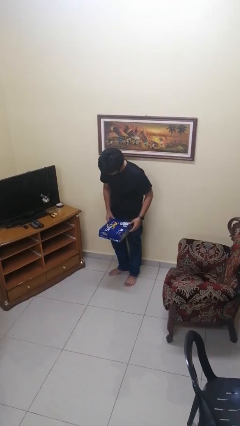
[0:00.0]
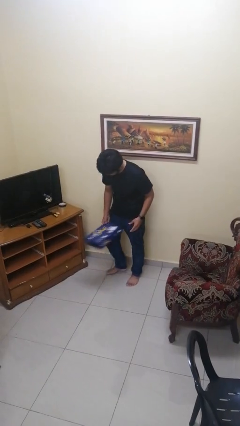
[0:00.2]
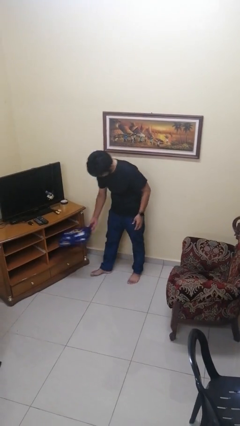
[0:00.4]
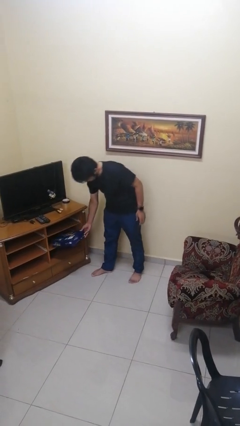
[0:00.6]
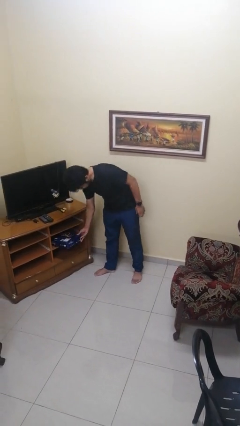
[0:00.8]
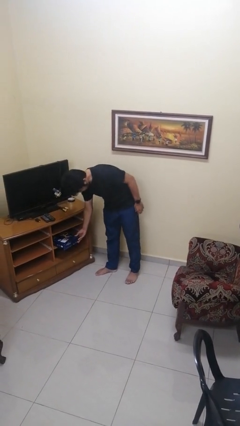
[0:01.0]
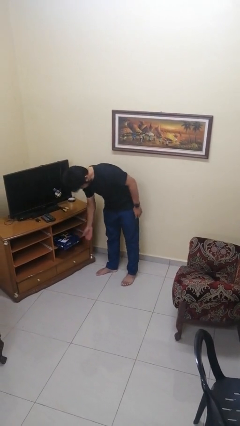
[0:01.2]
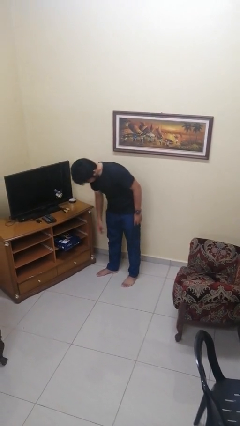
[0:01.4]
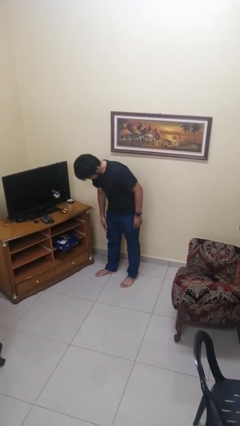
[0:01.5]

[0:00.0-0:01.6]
person puts down object into cabinet

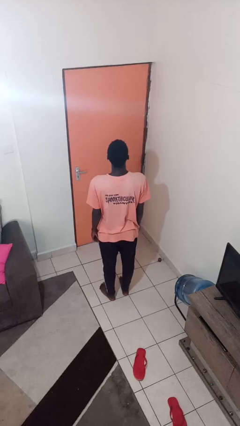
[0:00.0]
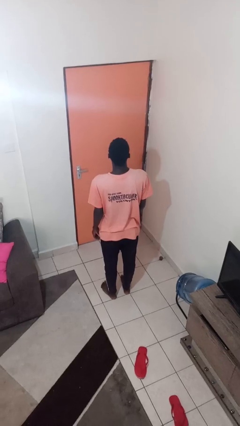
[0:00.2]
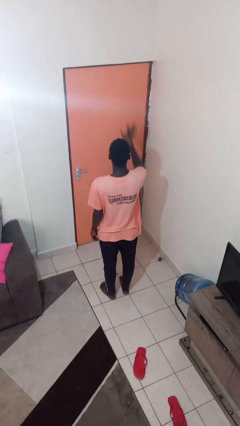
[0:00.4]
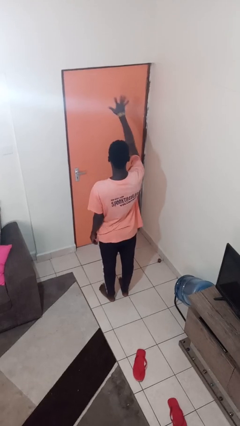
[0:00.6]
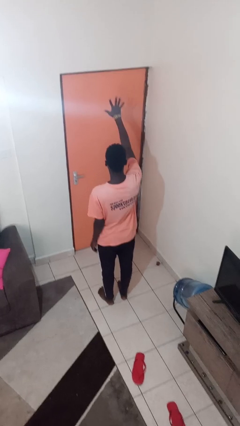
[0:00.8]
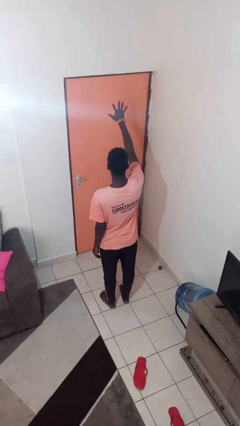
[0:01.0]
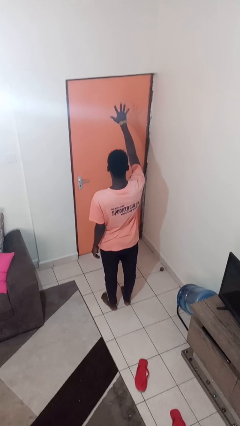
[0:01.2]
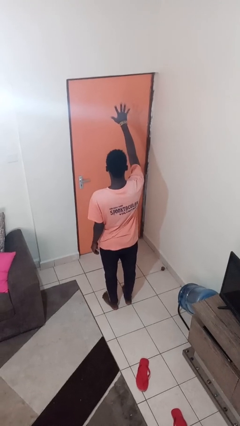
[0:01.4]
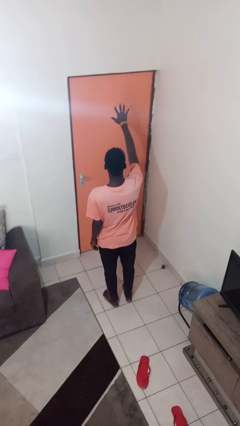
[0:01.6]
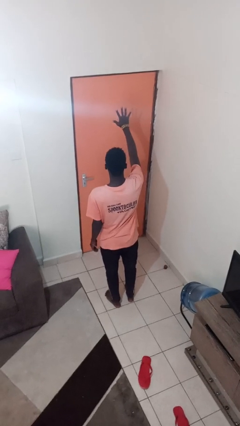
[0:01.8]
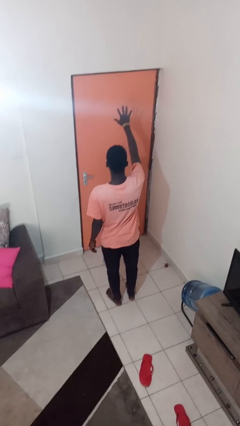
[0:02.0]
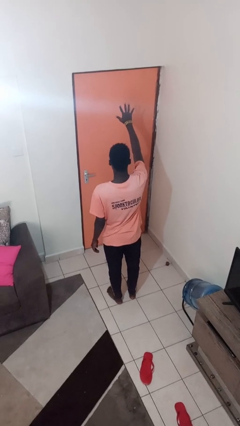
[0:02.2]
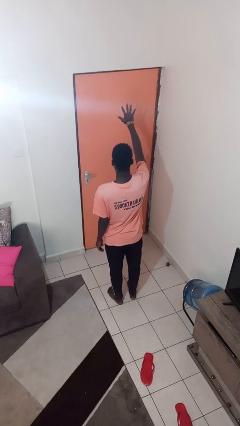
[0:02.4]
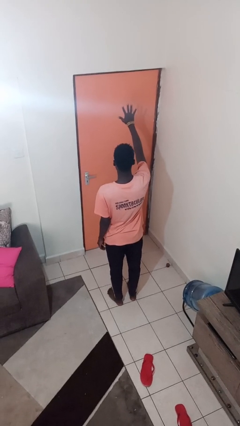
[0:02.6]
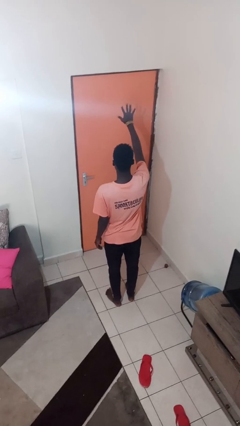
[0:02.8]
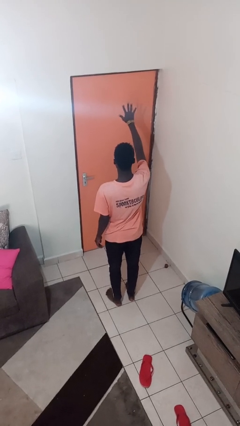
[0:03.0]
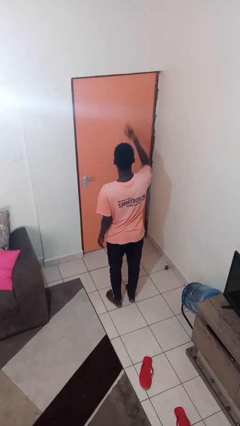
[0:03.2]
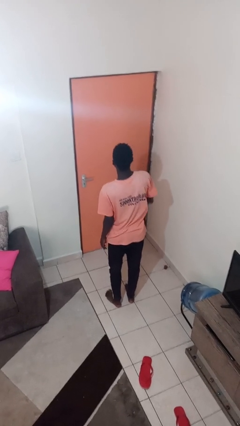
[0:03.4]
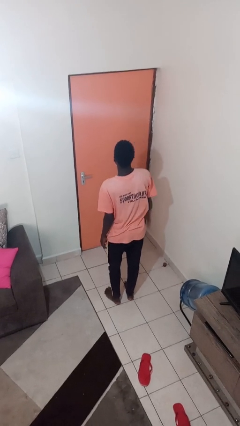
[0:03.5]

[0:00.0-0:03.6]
person gestures number five

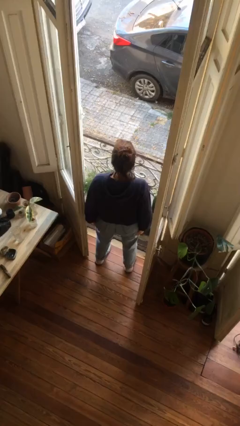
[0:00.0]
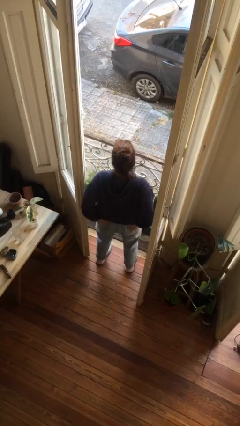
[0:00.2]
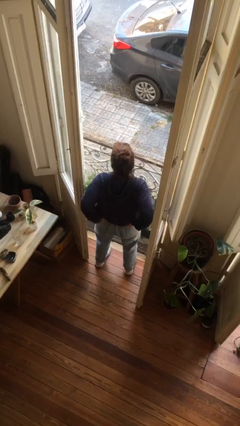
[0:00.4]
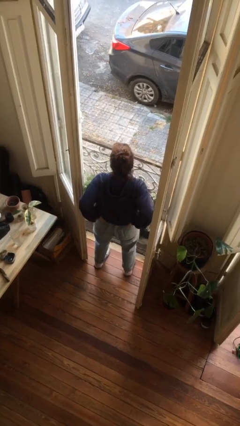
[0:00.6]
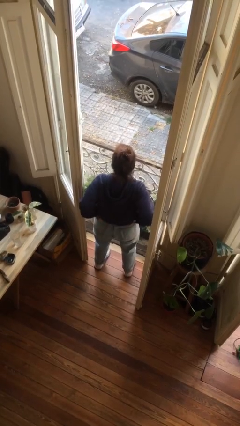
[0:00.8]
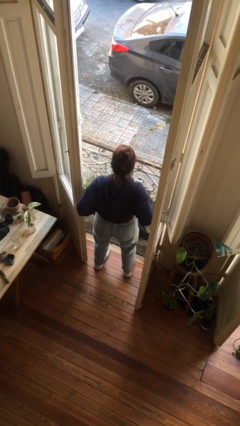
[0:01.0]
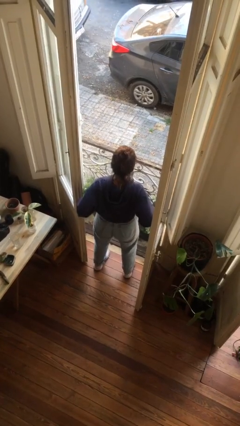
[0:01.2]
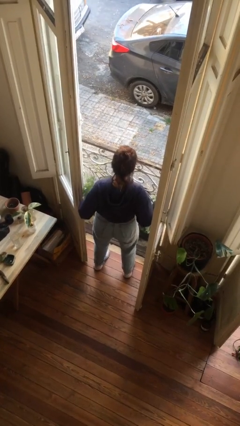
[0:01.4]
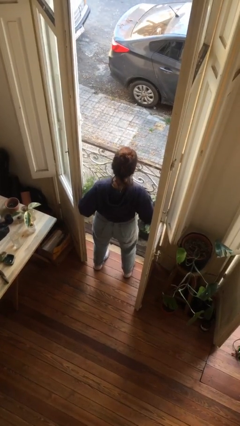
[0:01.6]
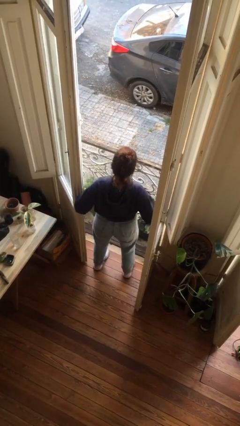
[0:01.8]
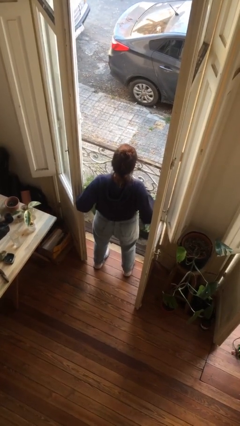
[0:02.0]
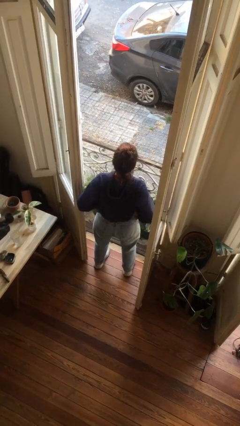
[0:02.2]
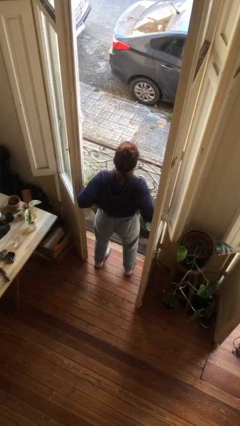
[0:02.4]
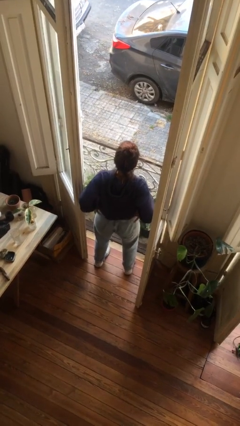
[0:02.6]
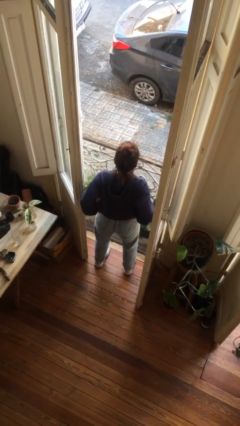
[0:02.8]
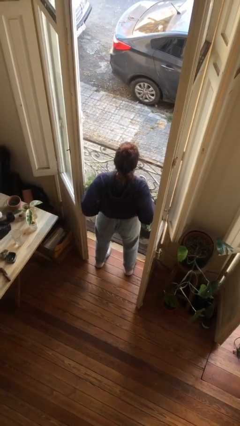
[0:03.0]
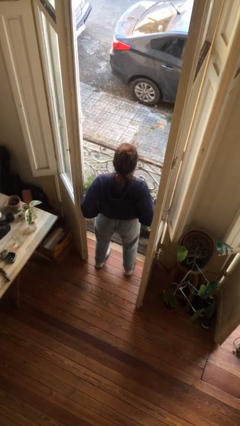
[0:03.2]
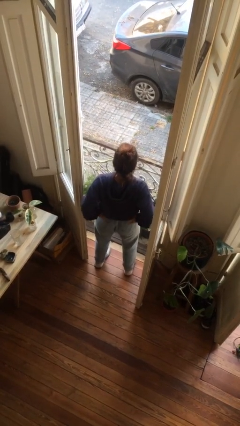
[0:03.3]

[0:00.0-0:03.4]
person hikes up pants

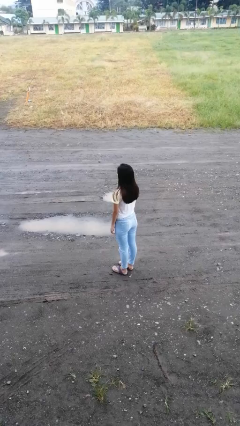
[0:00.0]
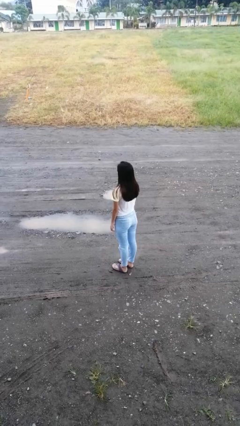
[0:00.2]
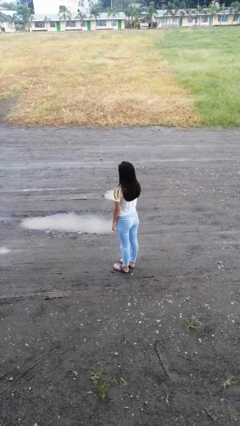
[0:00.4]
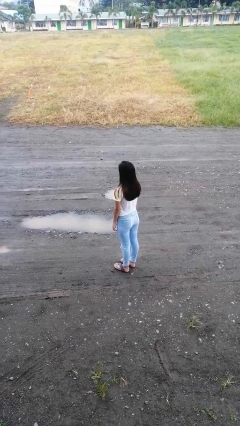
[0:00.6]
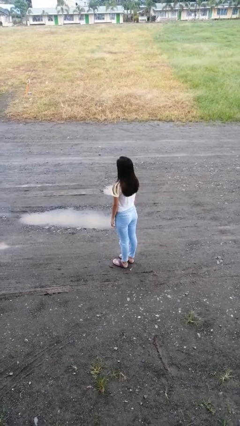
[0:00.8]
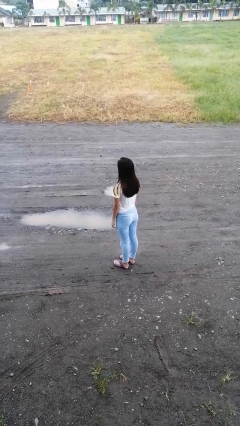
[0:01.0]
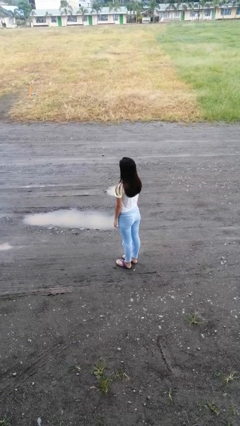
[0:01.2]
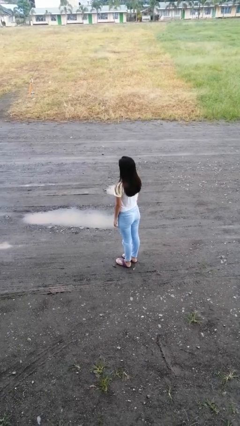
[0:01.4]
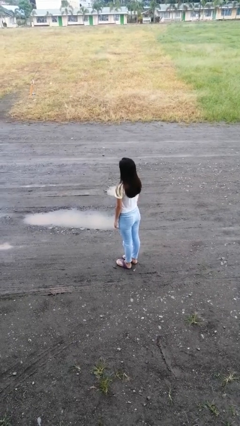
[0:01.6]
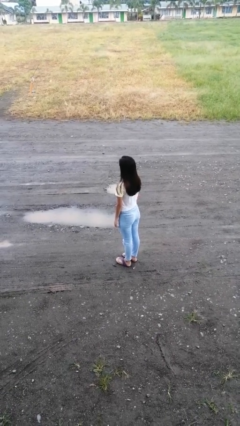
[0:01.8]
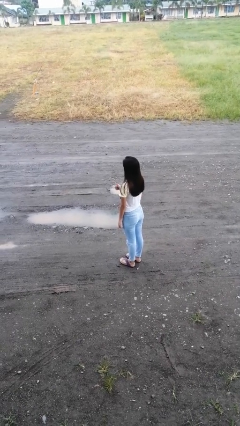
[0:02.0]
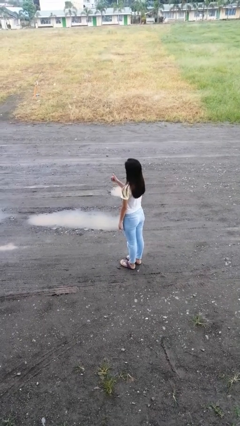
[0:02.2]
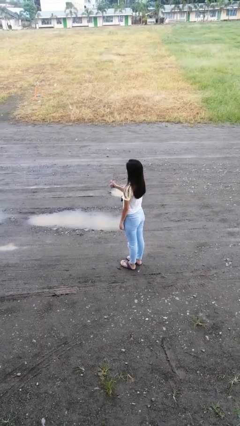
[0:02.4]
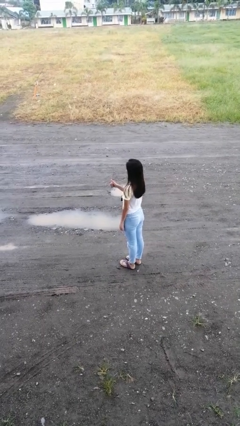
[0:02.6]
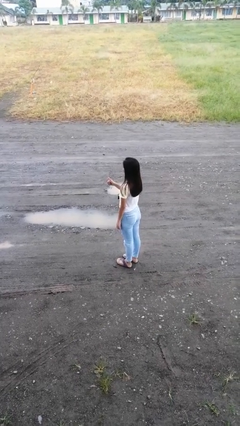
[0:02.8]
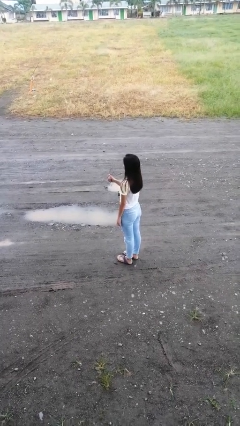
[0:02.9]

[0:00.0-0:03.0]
person gestures thumbs up

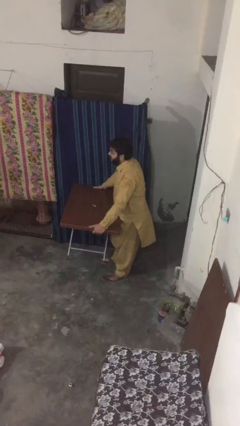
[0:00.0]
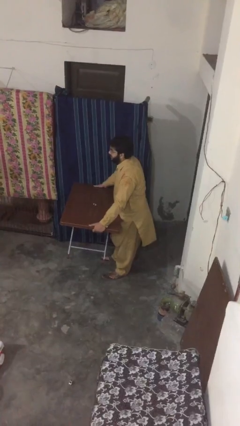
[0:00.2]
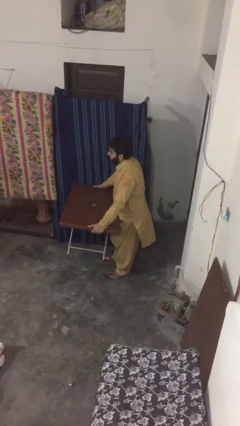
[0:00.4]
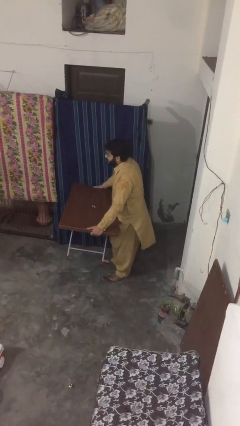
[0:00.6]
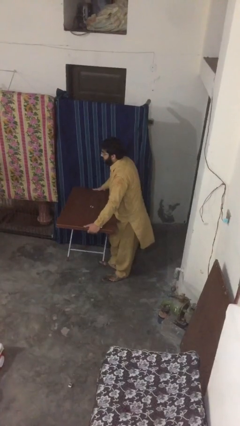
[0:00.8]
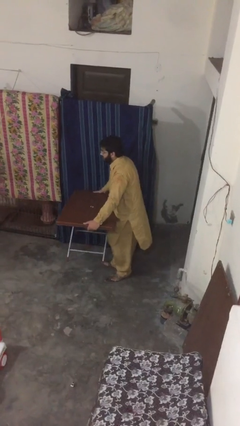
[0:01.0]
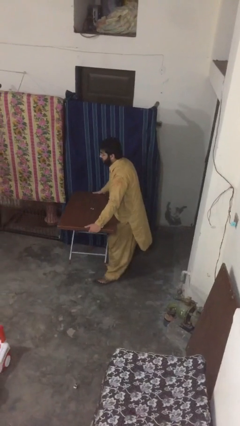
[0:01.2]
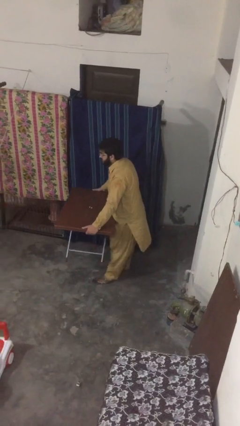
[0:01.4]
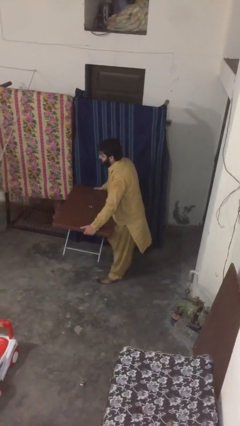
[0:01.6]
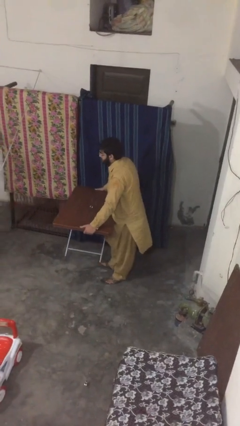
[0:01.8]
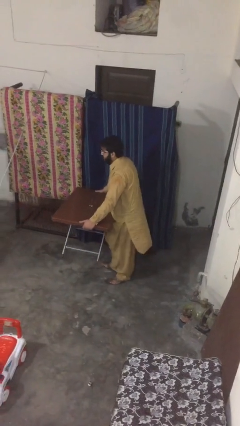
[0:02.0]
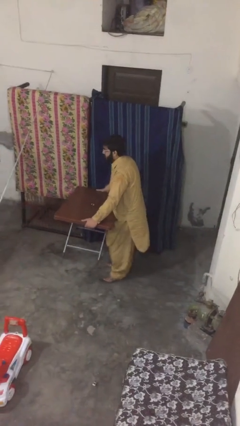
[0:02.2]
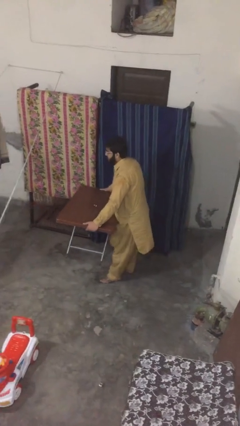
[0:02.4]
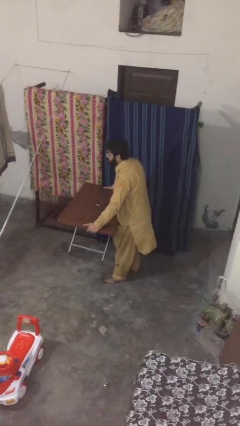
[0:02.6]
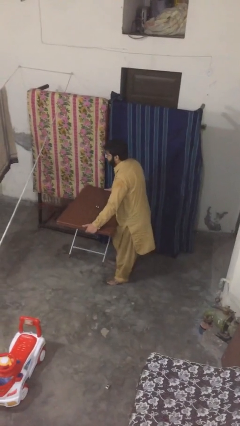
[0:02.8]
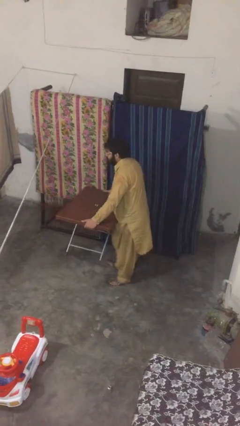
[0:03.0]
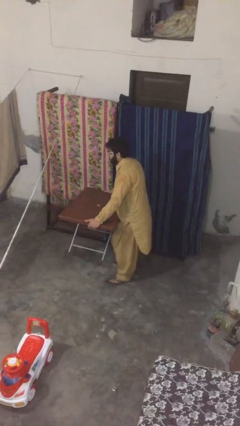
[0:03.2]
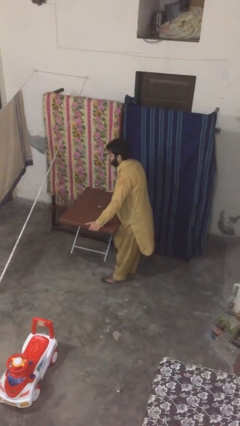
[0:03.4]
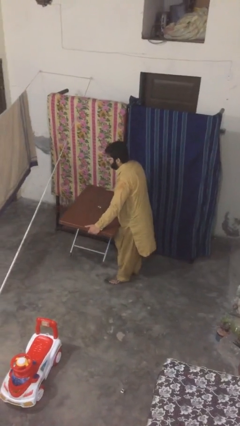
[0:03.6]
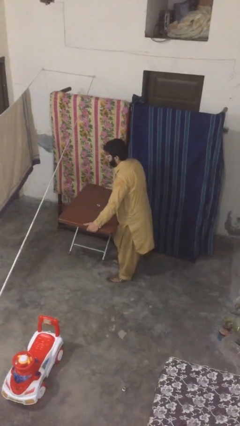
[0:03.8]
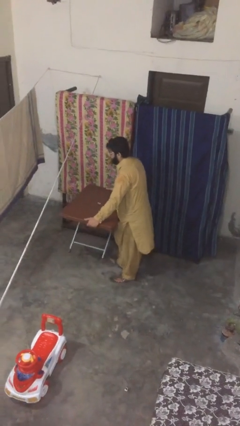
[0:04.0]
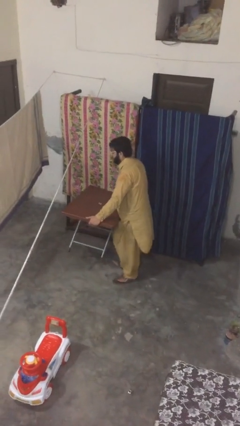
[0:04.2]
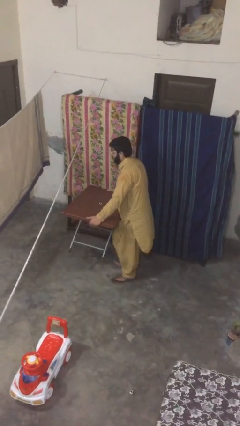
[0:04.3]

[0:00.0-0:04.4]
person carries heavy object

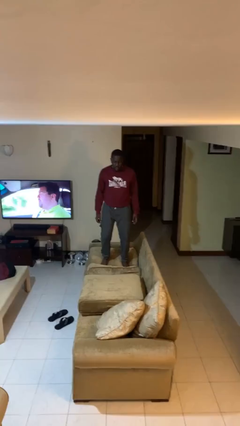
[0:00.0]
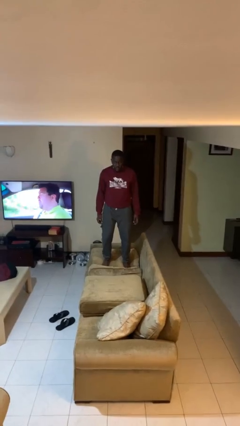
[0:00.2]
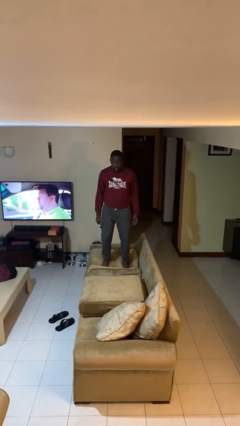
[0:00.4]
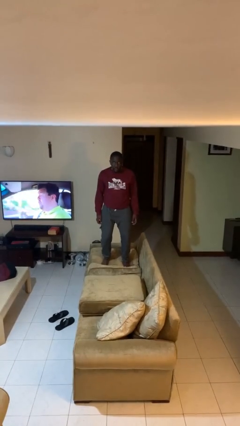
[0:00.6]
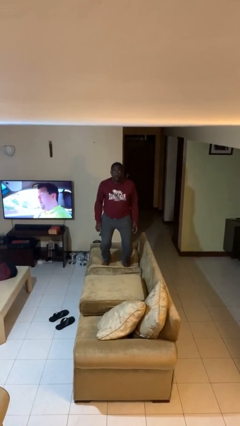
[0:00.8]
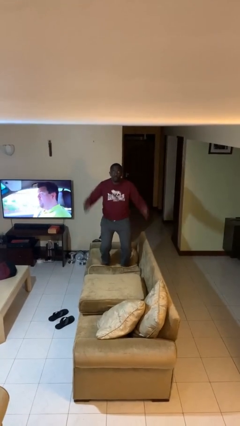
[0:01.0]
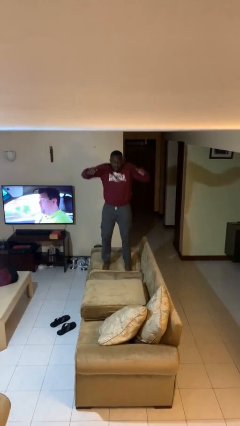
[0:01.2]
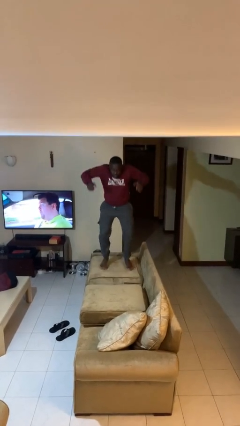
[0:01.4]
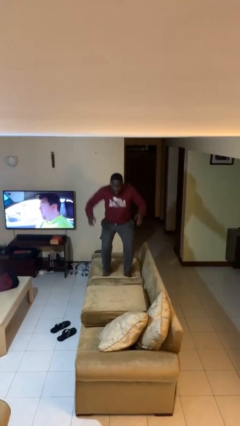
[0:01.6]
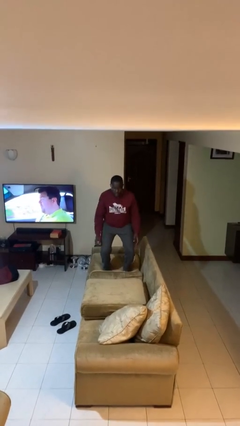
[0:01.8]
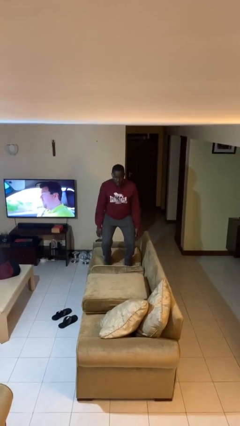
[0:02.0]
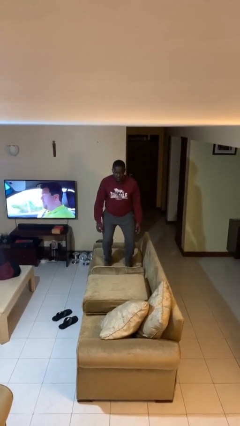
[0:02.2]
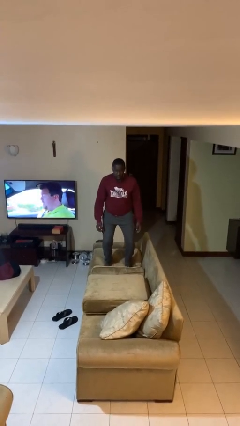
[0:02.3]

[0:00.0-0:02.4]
person jumps on couch
